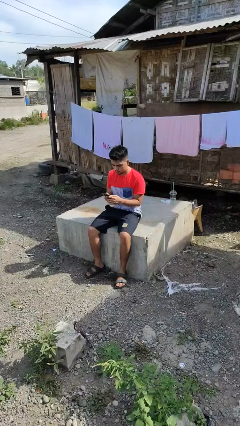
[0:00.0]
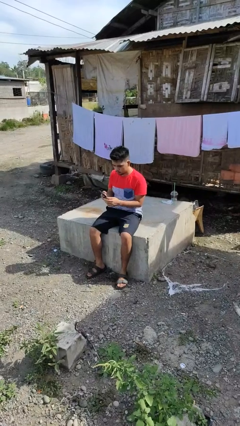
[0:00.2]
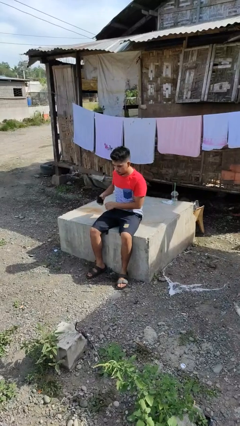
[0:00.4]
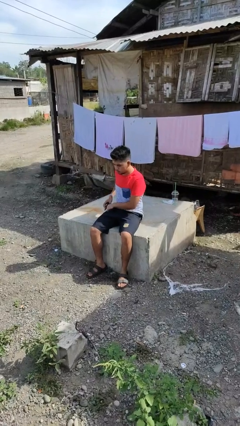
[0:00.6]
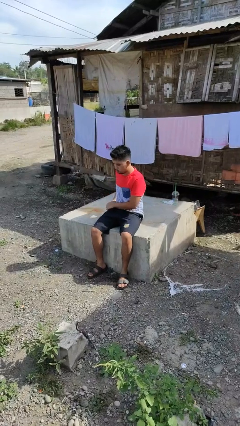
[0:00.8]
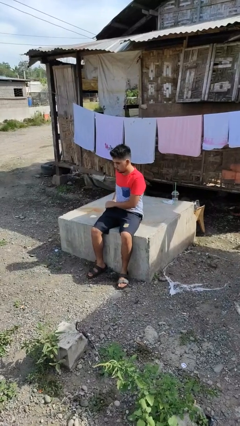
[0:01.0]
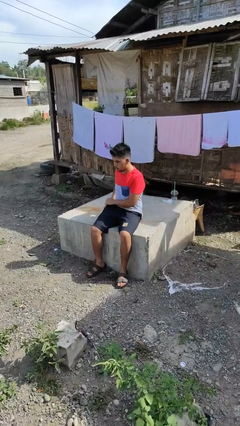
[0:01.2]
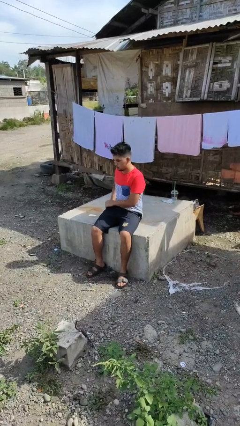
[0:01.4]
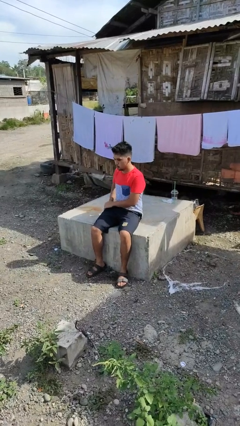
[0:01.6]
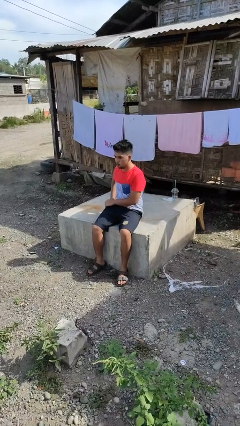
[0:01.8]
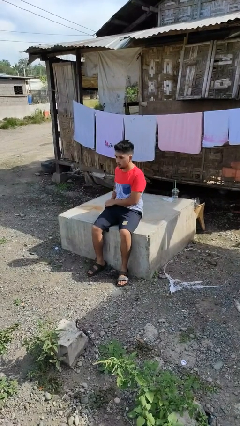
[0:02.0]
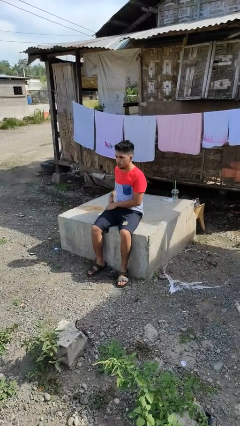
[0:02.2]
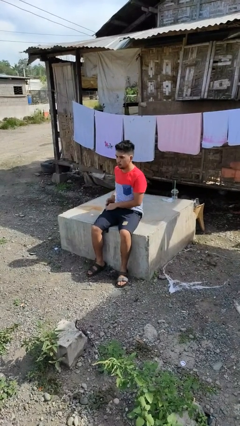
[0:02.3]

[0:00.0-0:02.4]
person puts phone into pocket

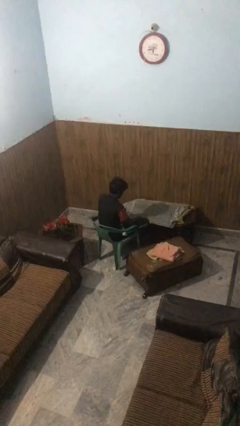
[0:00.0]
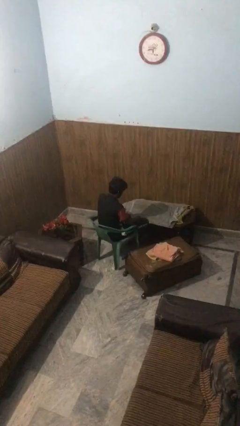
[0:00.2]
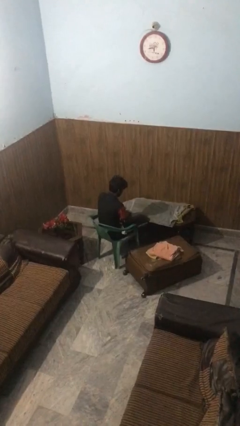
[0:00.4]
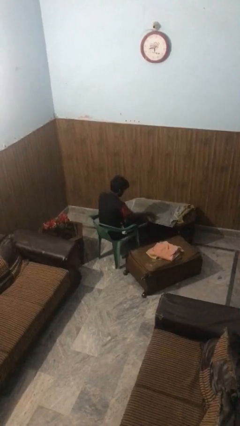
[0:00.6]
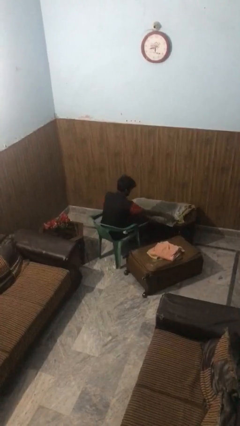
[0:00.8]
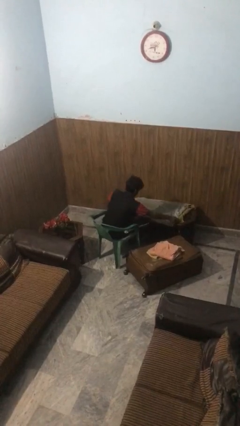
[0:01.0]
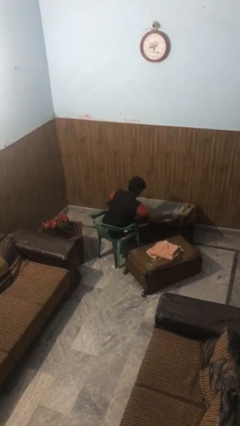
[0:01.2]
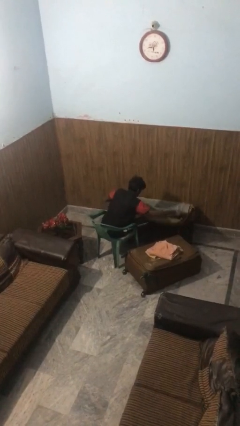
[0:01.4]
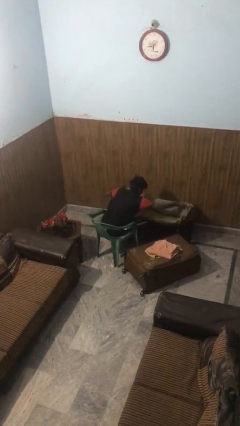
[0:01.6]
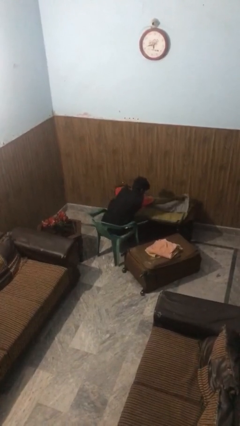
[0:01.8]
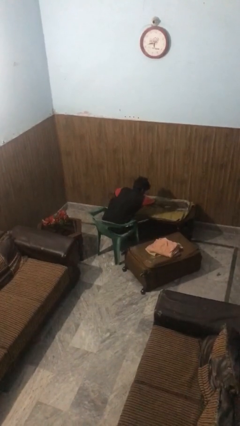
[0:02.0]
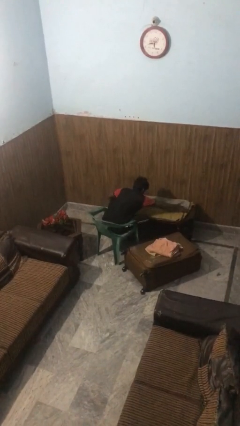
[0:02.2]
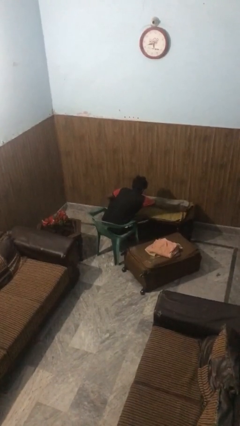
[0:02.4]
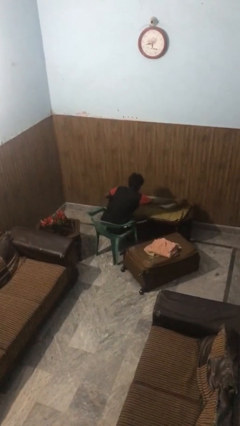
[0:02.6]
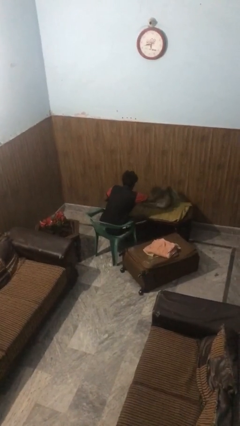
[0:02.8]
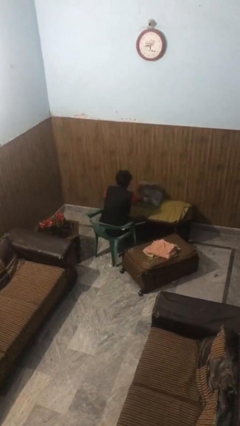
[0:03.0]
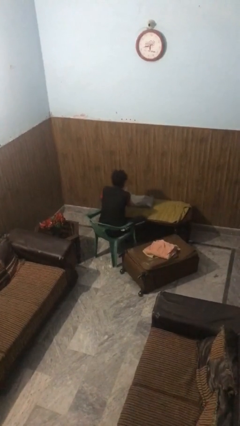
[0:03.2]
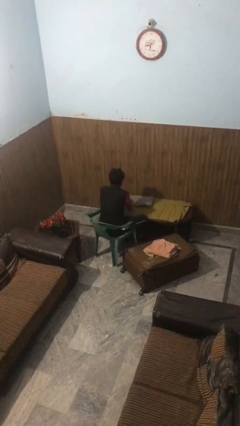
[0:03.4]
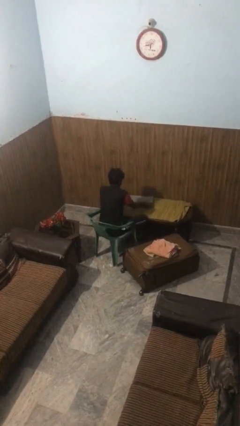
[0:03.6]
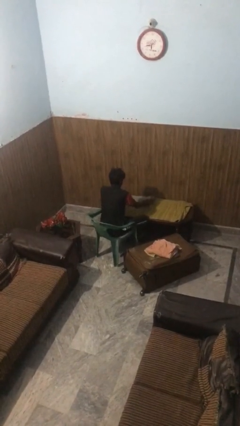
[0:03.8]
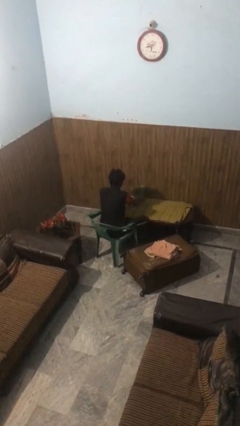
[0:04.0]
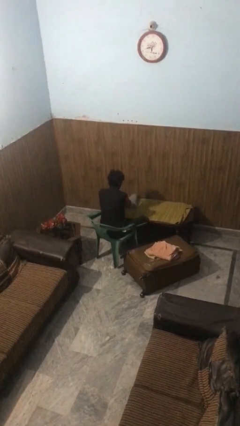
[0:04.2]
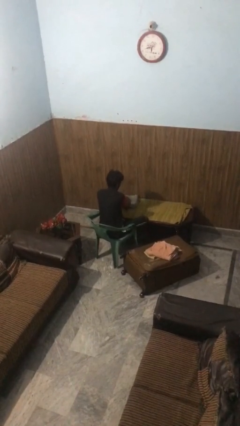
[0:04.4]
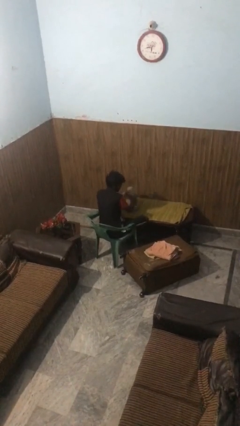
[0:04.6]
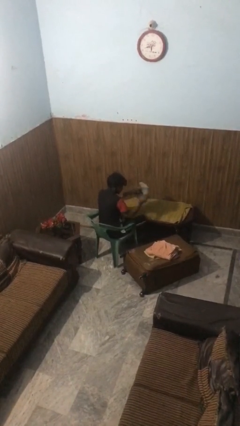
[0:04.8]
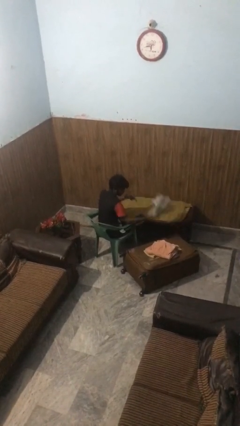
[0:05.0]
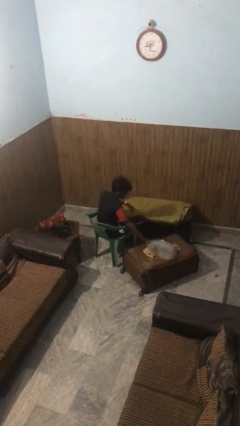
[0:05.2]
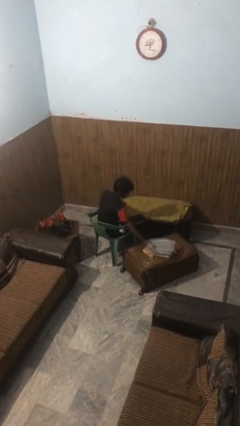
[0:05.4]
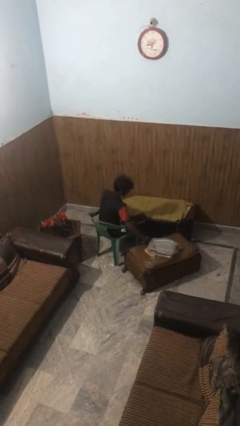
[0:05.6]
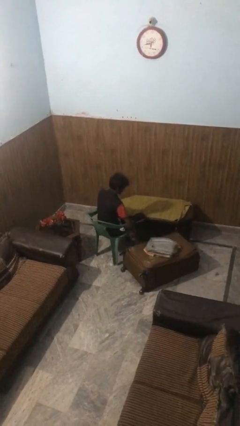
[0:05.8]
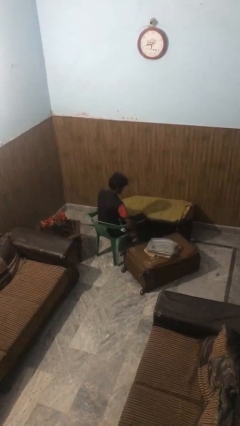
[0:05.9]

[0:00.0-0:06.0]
person folds towel

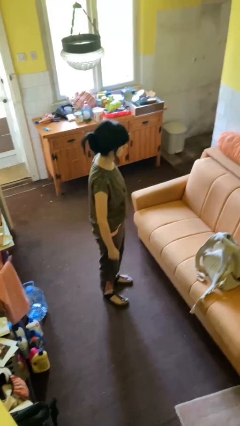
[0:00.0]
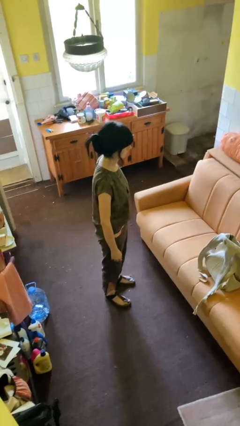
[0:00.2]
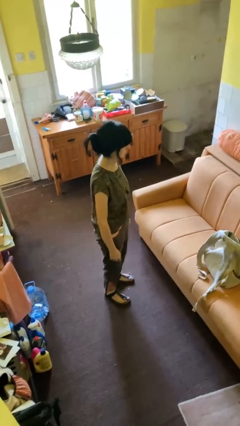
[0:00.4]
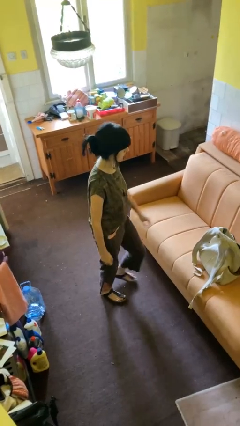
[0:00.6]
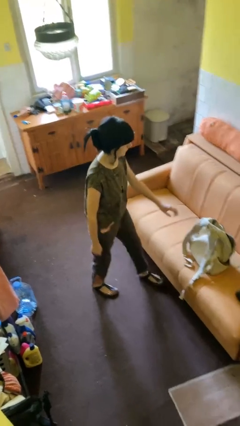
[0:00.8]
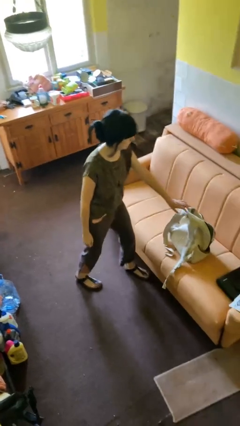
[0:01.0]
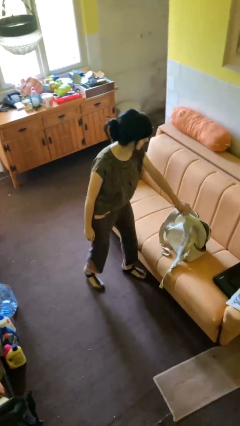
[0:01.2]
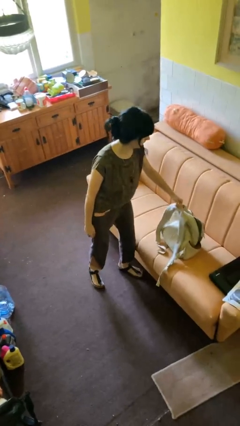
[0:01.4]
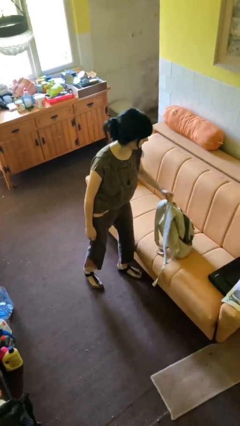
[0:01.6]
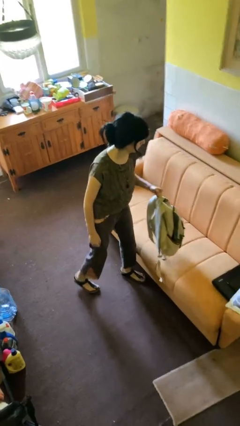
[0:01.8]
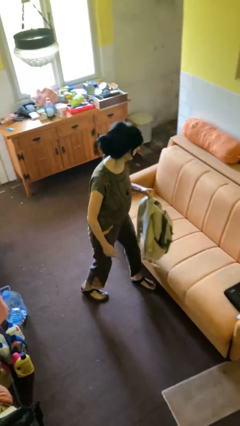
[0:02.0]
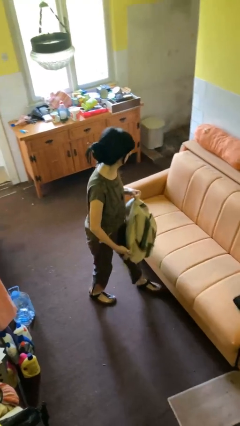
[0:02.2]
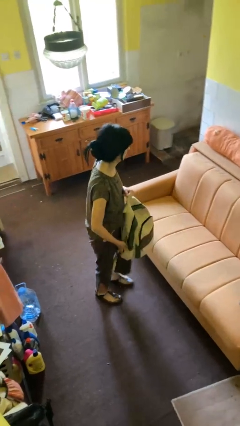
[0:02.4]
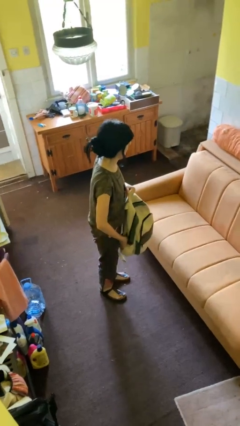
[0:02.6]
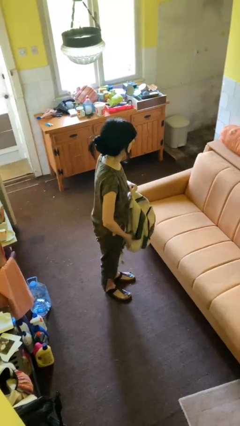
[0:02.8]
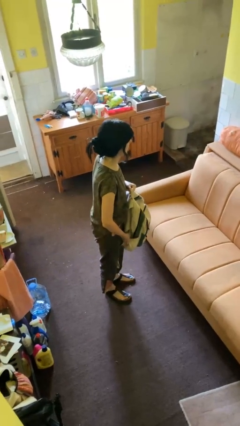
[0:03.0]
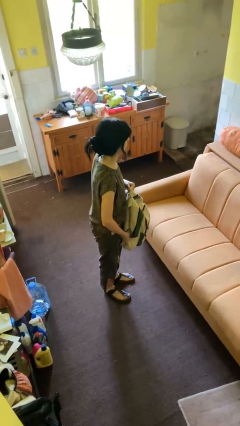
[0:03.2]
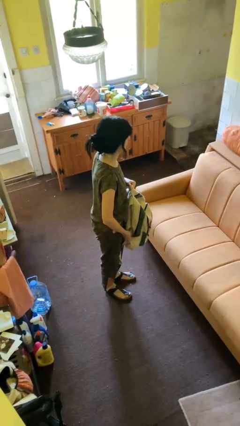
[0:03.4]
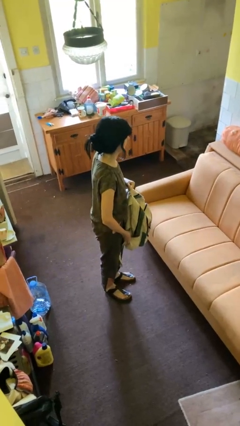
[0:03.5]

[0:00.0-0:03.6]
person picks up object from couch

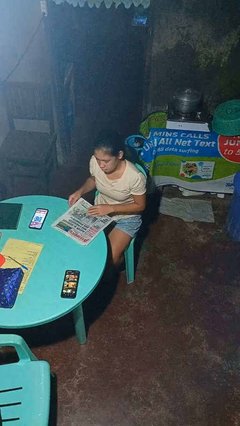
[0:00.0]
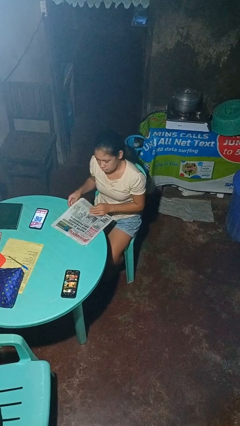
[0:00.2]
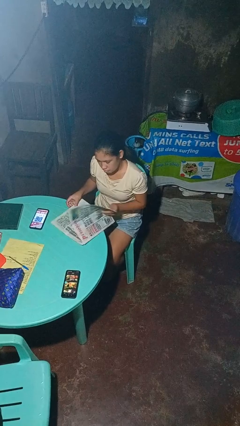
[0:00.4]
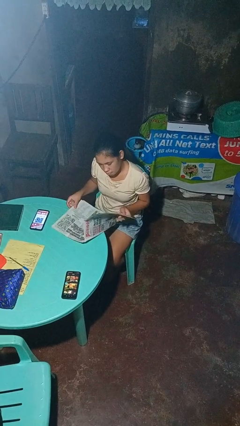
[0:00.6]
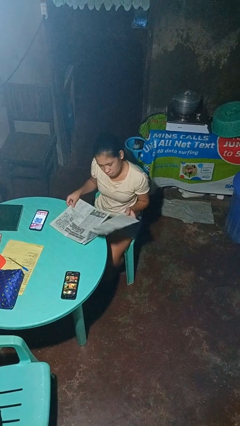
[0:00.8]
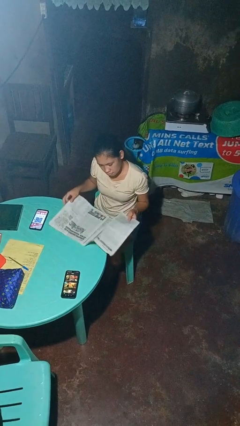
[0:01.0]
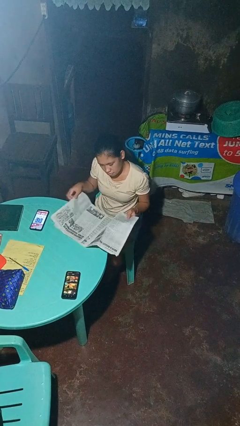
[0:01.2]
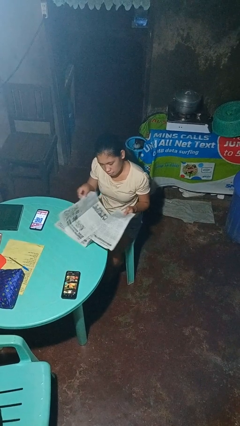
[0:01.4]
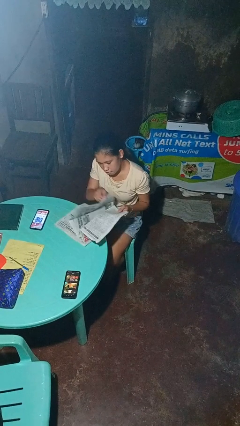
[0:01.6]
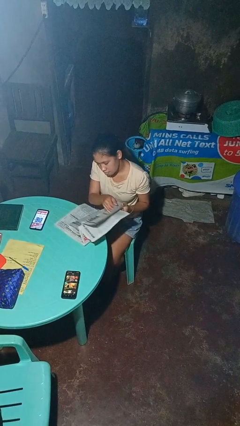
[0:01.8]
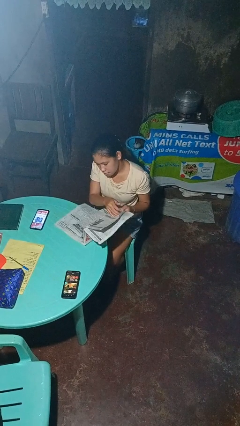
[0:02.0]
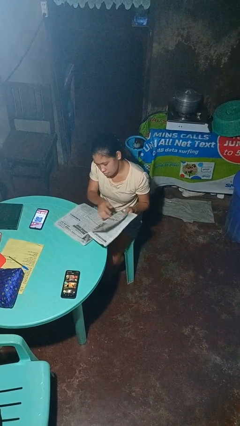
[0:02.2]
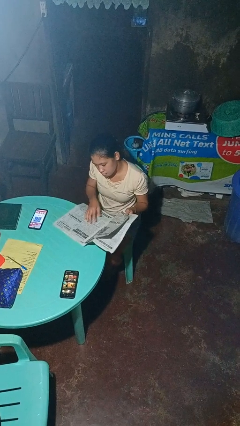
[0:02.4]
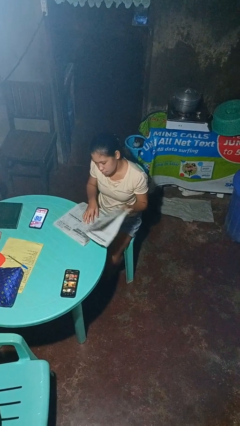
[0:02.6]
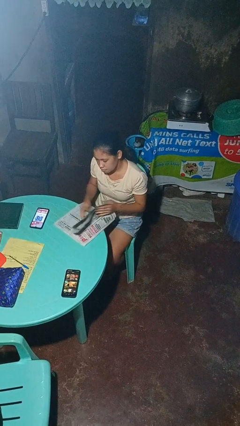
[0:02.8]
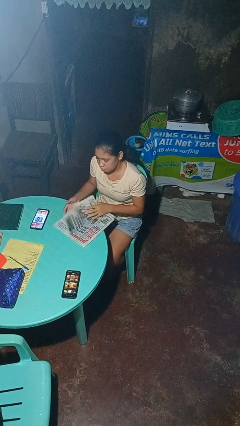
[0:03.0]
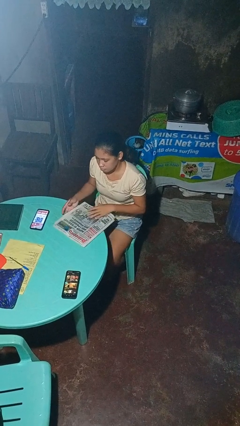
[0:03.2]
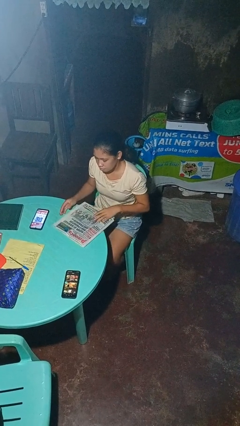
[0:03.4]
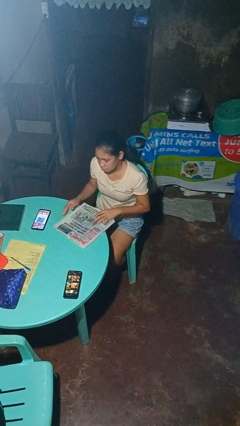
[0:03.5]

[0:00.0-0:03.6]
person reads newspaper

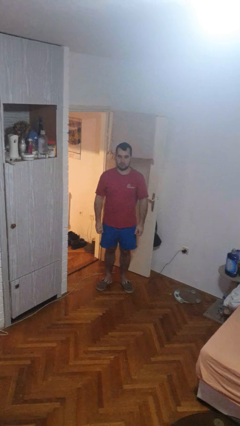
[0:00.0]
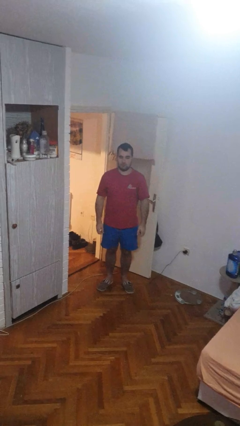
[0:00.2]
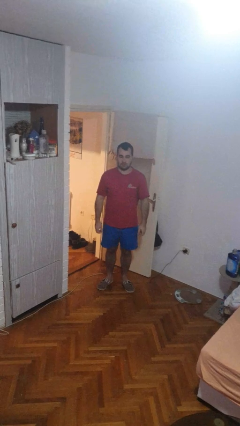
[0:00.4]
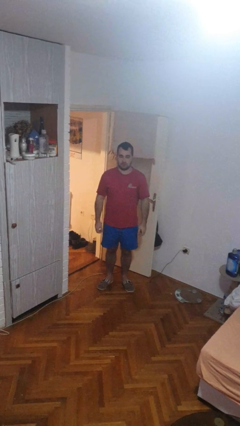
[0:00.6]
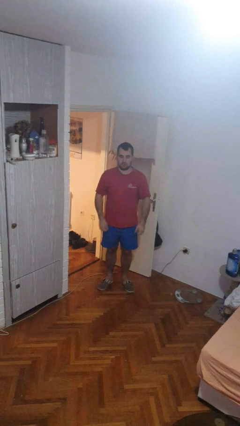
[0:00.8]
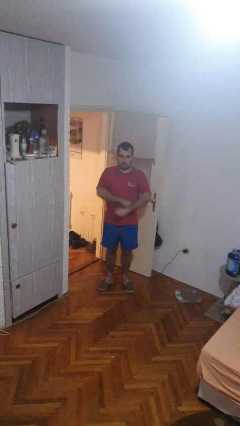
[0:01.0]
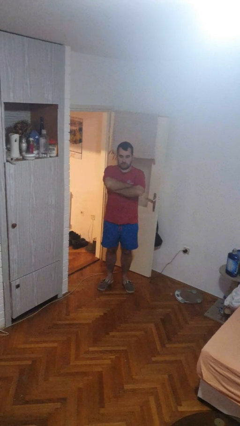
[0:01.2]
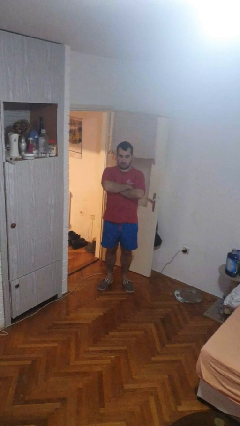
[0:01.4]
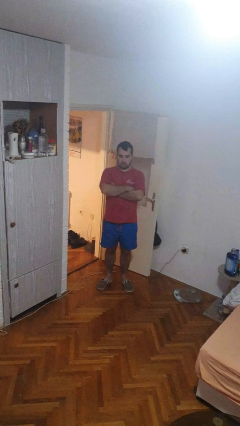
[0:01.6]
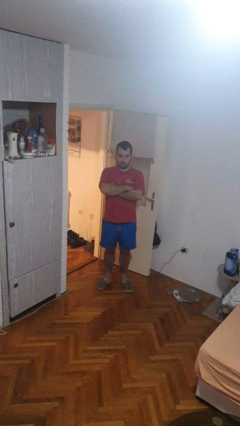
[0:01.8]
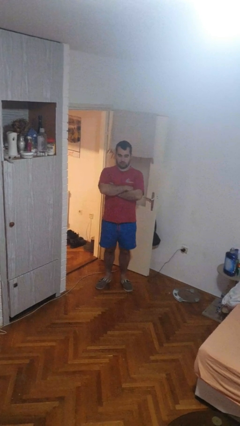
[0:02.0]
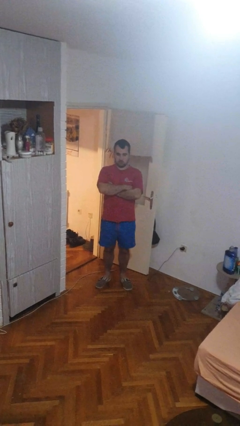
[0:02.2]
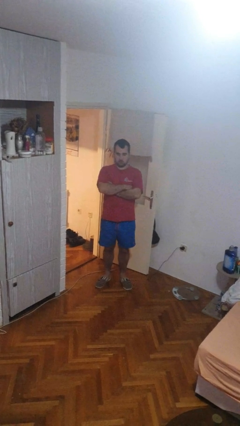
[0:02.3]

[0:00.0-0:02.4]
person crosses arms
